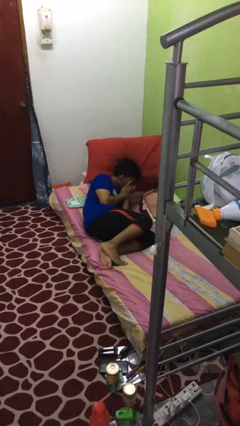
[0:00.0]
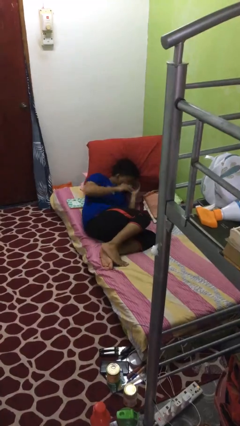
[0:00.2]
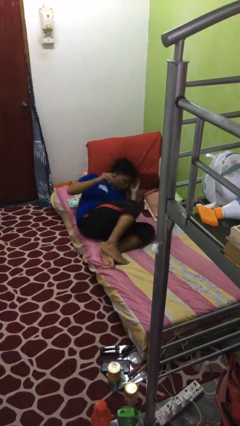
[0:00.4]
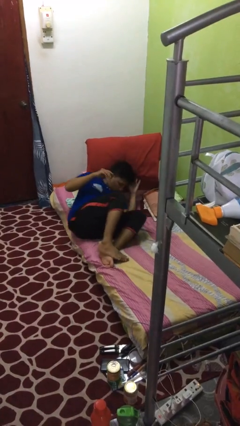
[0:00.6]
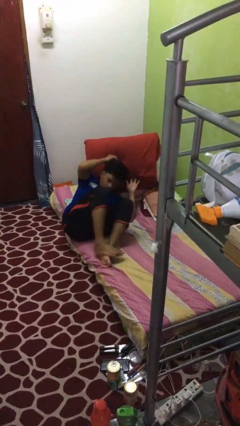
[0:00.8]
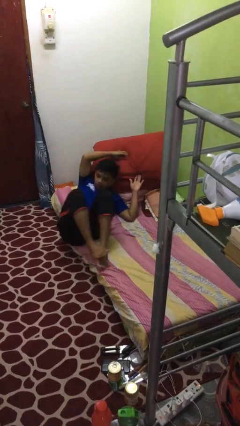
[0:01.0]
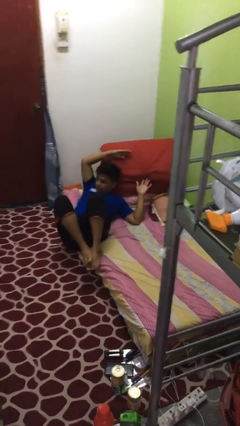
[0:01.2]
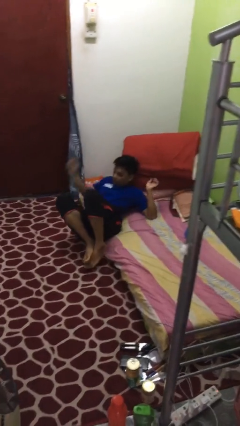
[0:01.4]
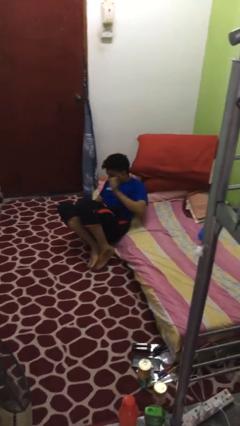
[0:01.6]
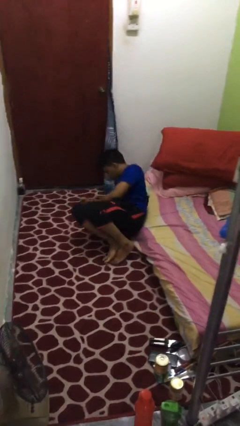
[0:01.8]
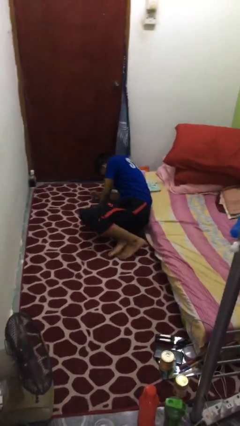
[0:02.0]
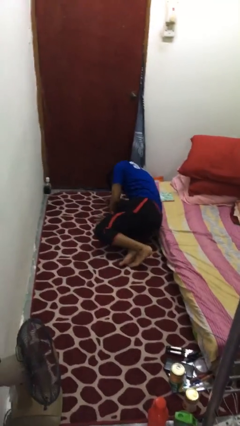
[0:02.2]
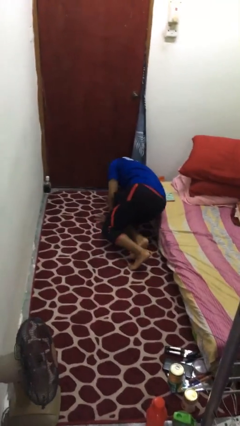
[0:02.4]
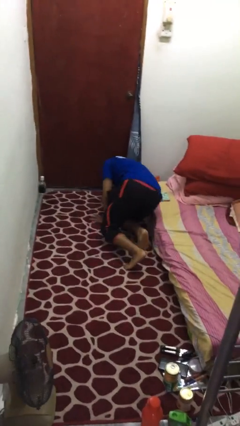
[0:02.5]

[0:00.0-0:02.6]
person falls from bed

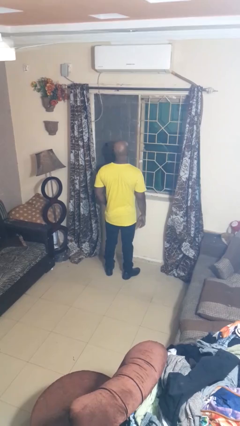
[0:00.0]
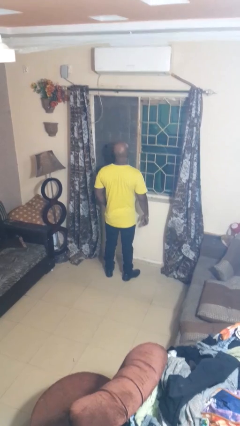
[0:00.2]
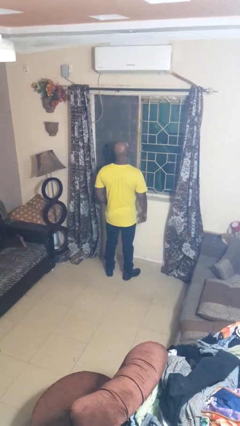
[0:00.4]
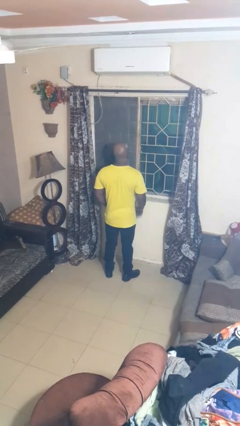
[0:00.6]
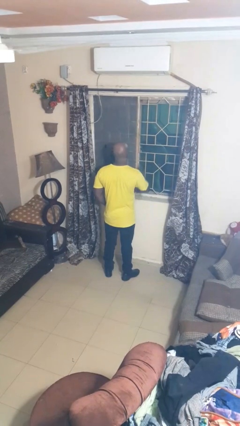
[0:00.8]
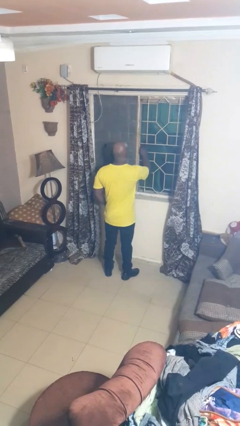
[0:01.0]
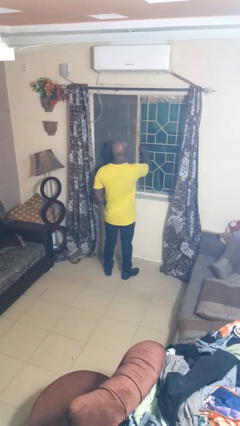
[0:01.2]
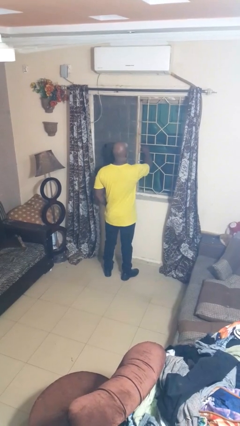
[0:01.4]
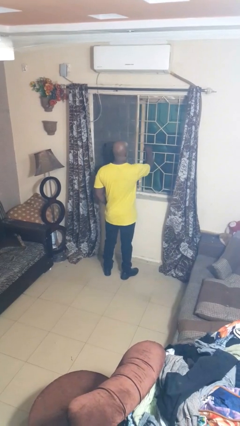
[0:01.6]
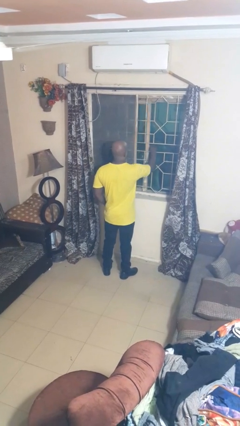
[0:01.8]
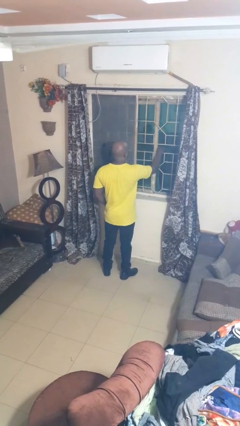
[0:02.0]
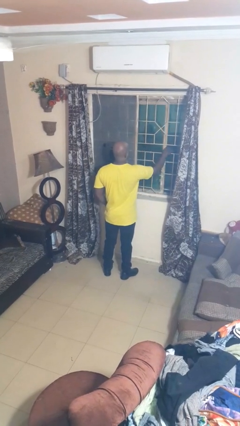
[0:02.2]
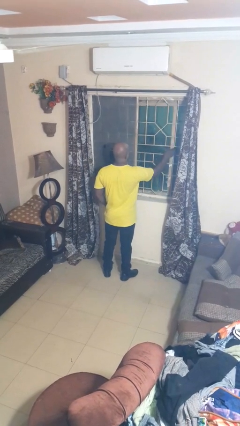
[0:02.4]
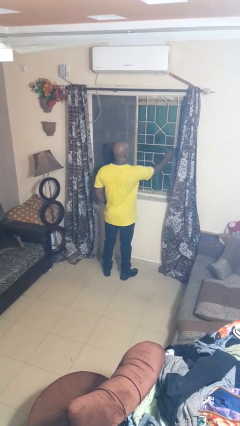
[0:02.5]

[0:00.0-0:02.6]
person opens home window

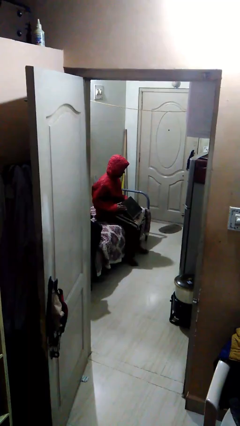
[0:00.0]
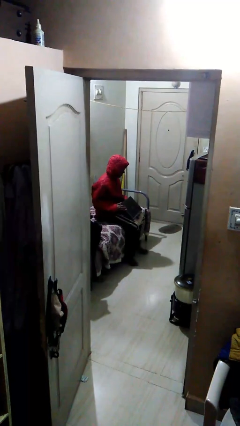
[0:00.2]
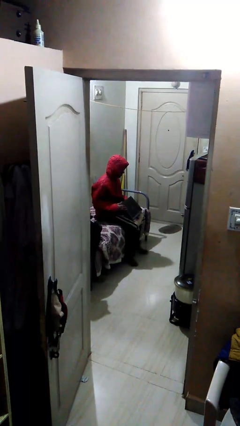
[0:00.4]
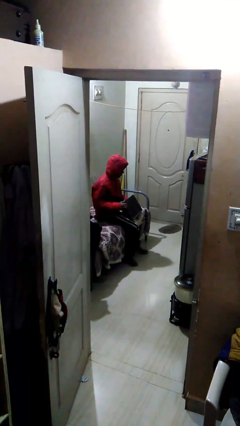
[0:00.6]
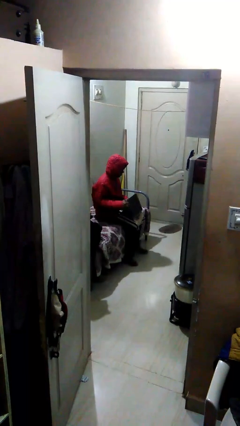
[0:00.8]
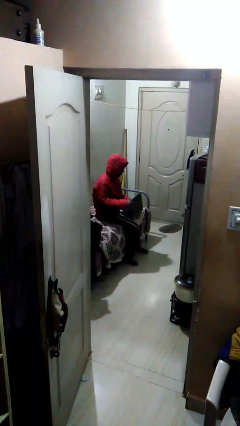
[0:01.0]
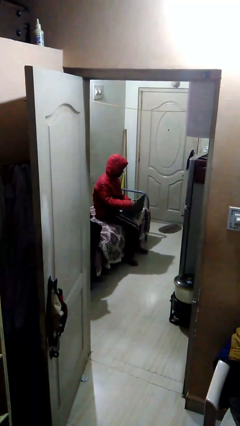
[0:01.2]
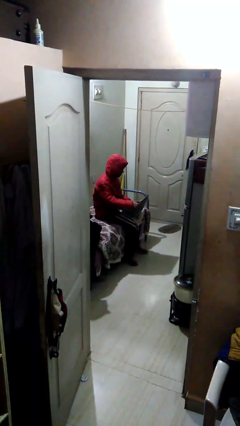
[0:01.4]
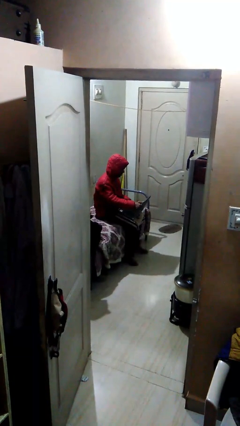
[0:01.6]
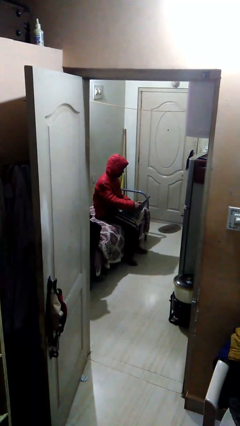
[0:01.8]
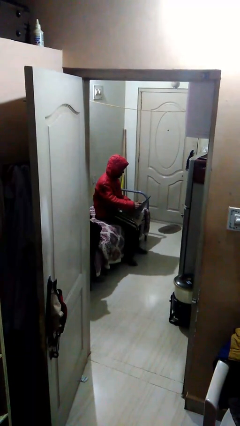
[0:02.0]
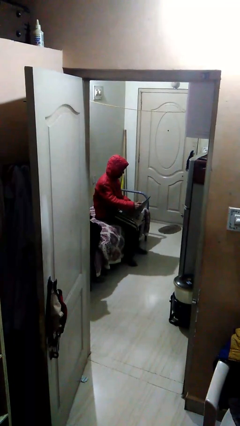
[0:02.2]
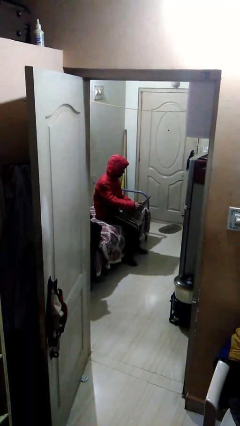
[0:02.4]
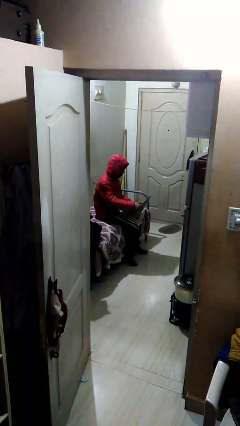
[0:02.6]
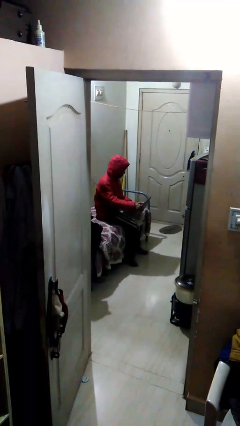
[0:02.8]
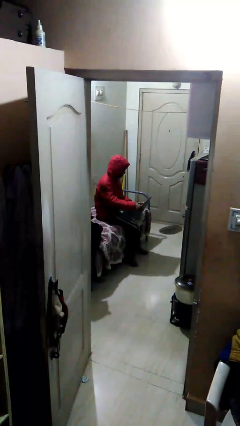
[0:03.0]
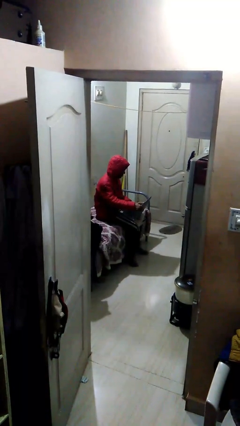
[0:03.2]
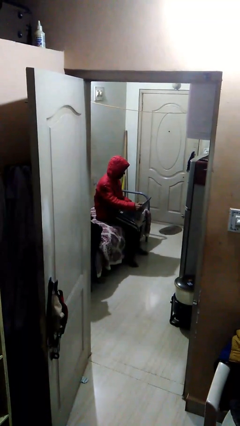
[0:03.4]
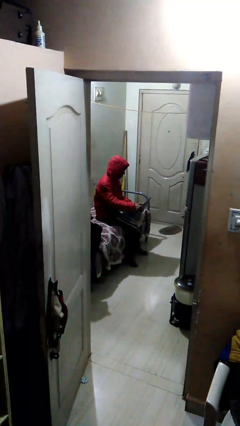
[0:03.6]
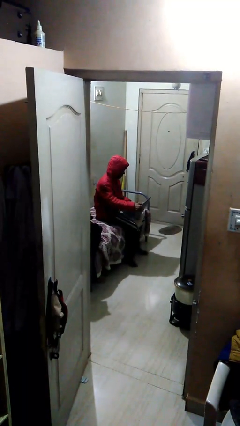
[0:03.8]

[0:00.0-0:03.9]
person interacts with laptop

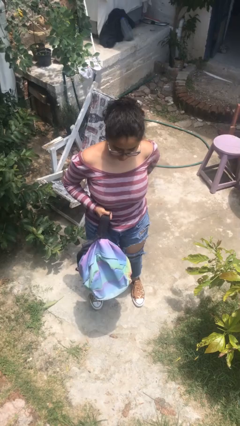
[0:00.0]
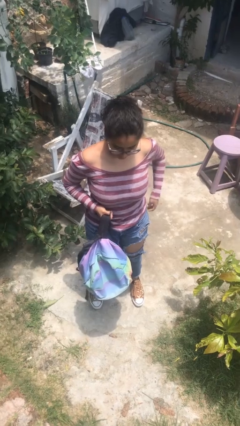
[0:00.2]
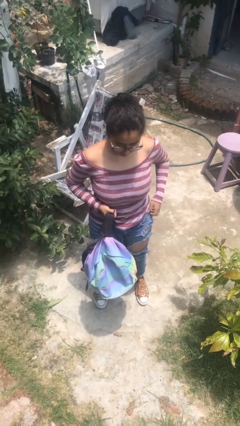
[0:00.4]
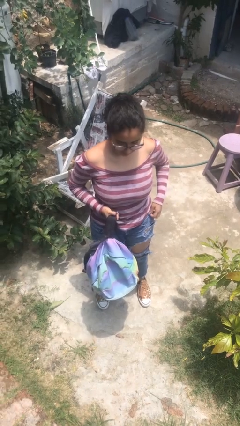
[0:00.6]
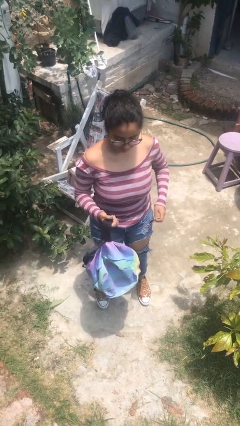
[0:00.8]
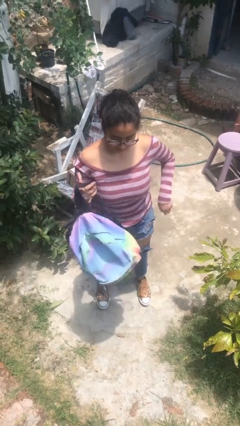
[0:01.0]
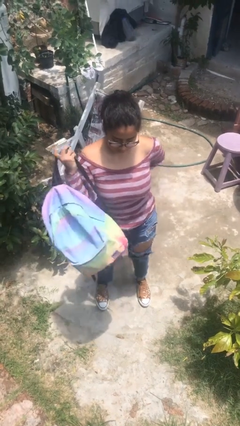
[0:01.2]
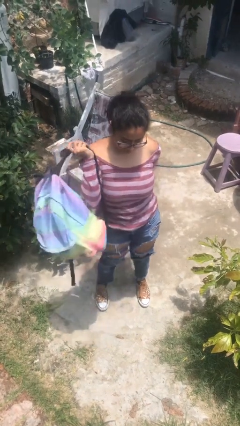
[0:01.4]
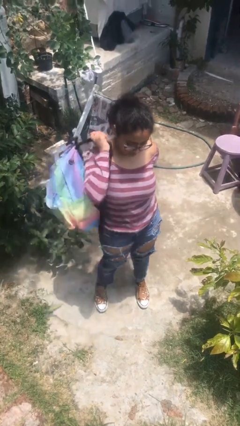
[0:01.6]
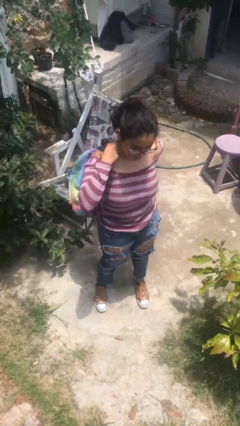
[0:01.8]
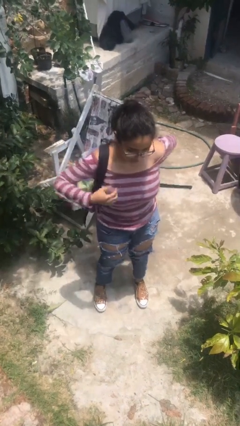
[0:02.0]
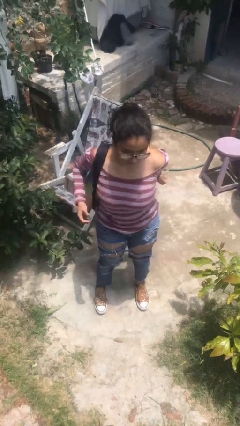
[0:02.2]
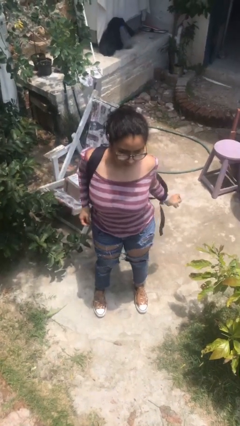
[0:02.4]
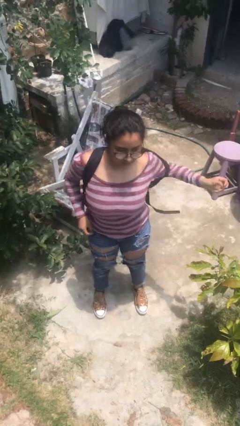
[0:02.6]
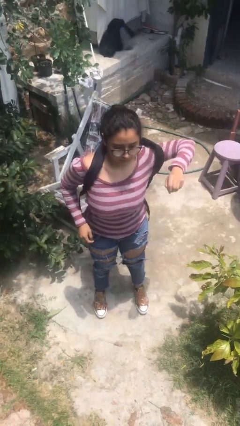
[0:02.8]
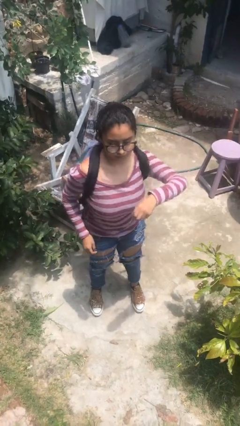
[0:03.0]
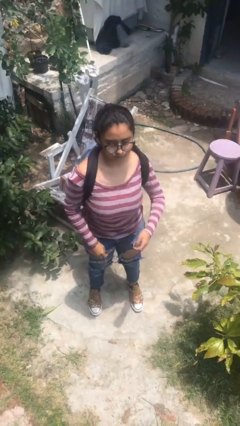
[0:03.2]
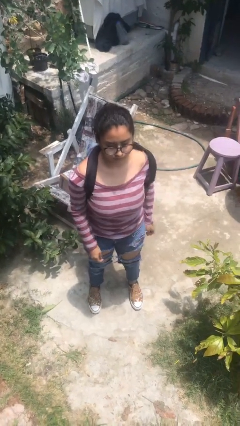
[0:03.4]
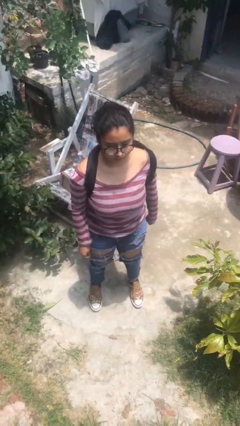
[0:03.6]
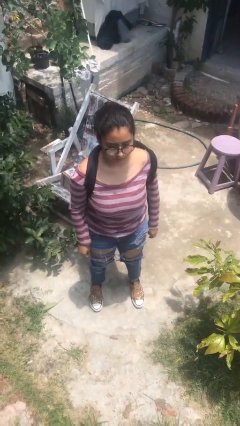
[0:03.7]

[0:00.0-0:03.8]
person puts on backpack

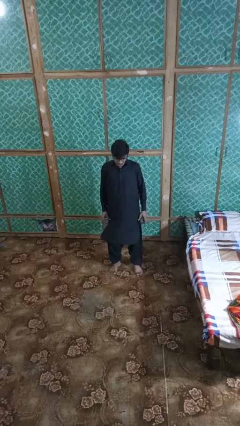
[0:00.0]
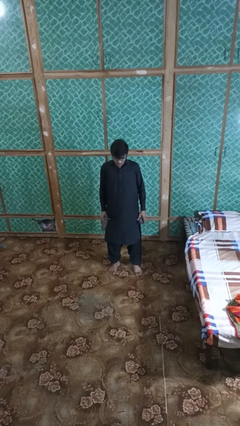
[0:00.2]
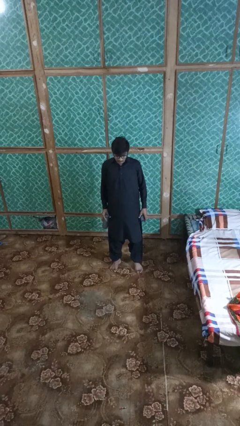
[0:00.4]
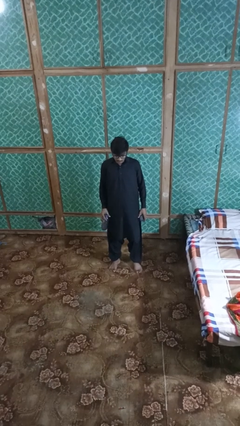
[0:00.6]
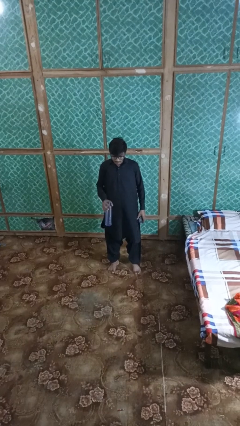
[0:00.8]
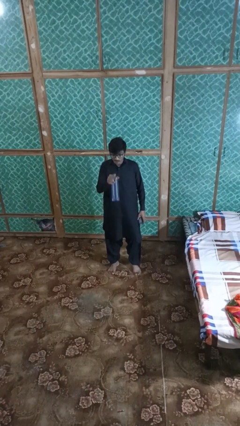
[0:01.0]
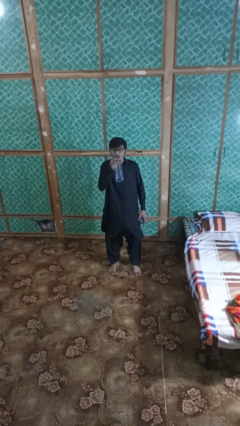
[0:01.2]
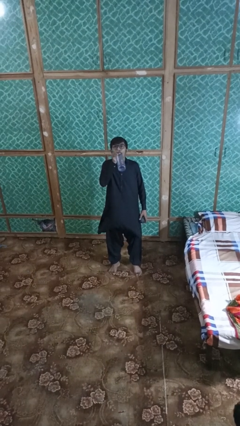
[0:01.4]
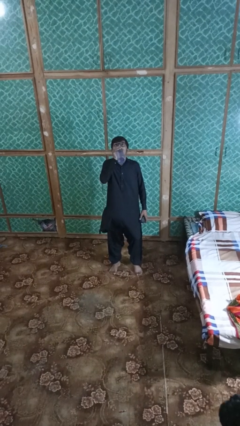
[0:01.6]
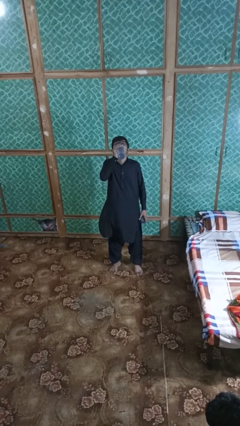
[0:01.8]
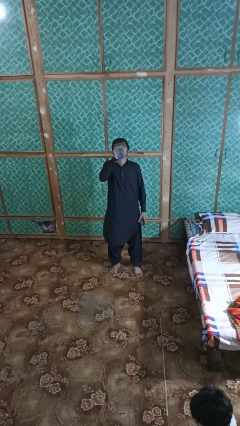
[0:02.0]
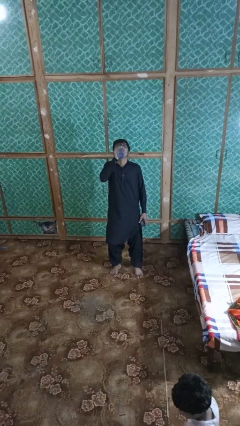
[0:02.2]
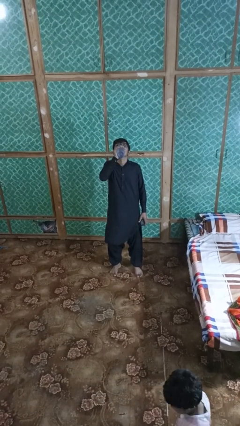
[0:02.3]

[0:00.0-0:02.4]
person drinks from bottle

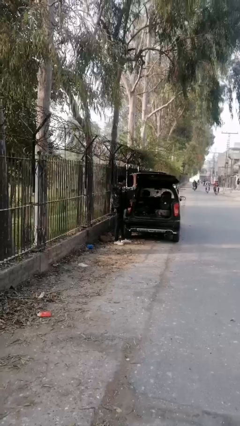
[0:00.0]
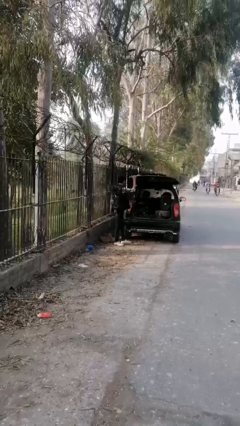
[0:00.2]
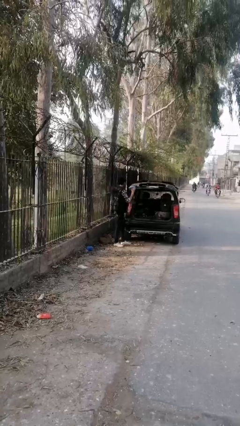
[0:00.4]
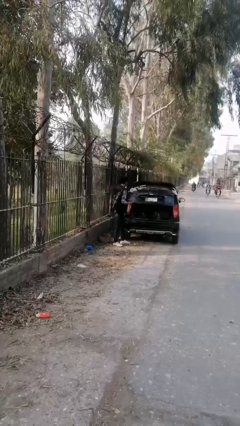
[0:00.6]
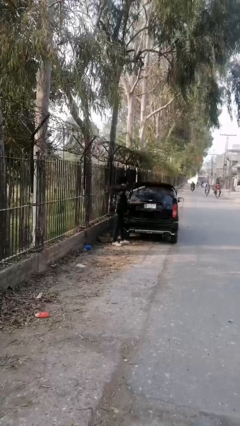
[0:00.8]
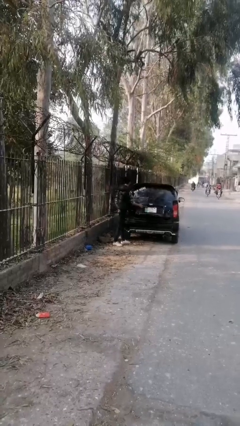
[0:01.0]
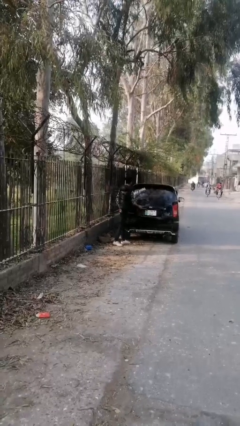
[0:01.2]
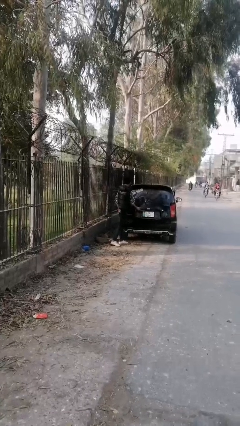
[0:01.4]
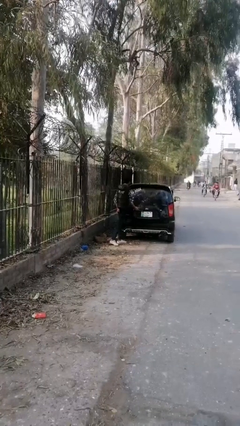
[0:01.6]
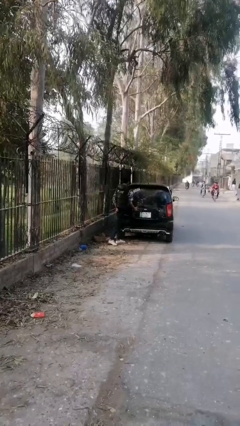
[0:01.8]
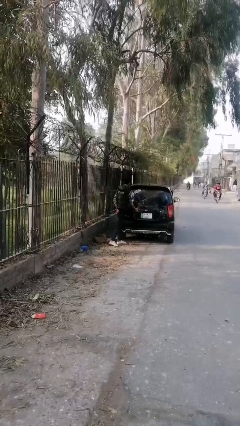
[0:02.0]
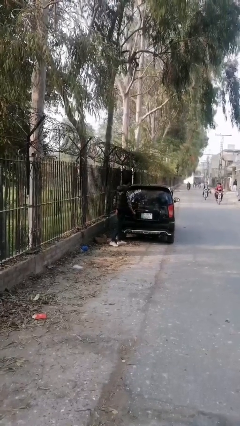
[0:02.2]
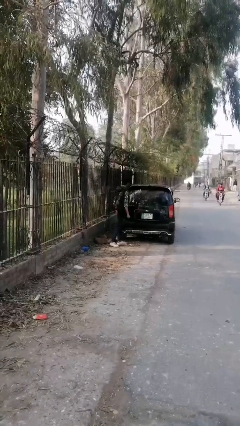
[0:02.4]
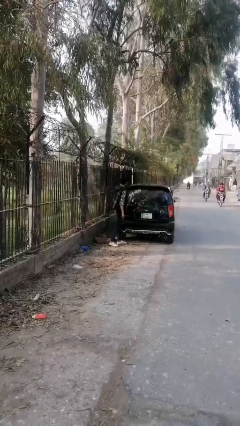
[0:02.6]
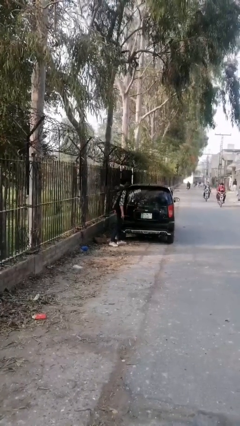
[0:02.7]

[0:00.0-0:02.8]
person closes car trunk
